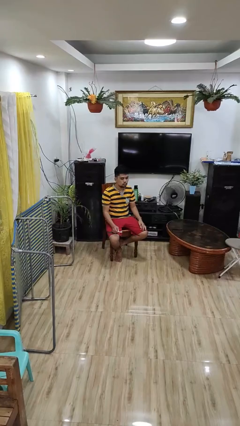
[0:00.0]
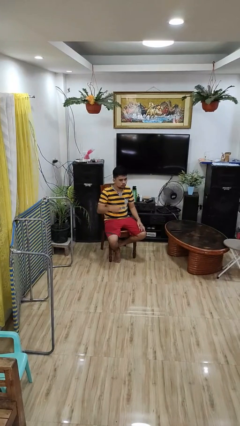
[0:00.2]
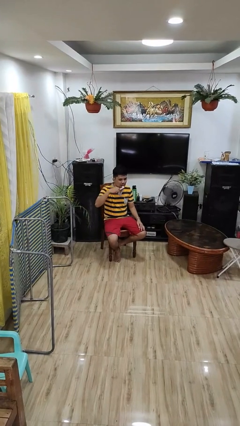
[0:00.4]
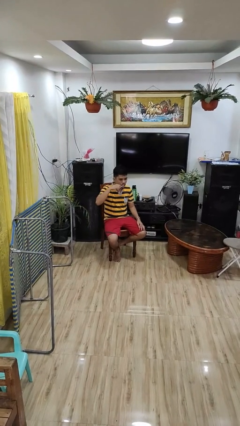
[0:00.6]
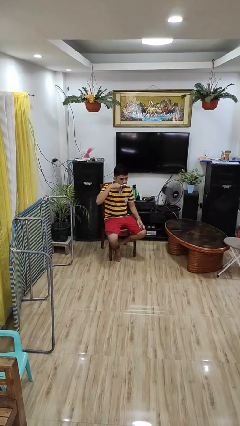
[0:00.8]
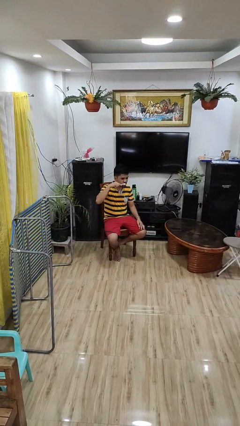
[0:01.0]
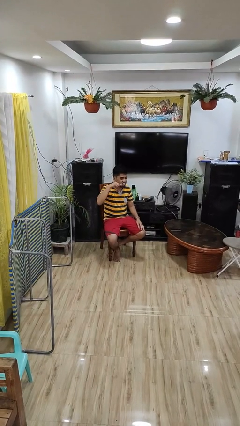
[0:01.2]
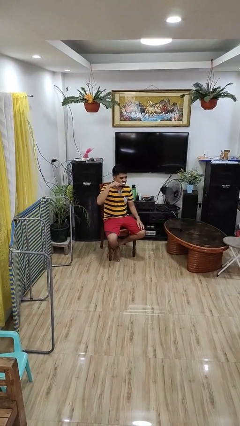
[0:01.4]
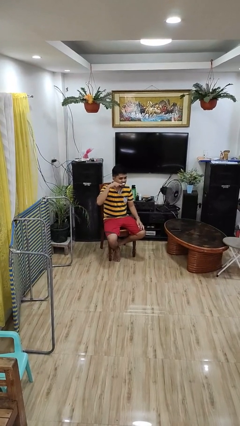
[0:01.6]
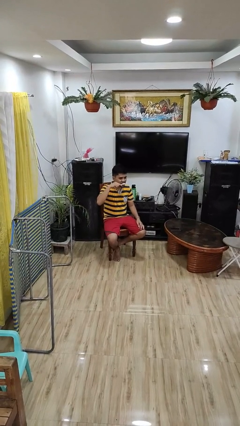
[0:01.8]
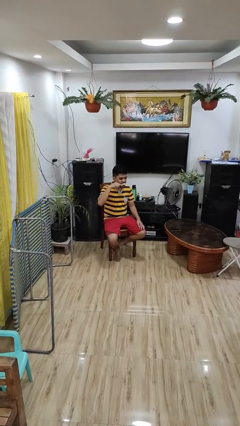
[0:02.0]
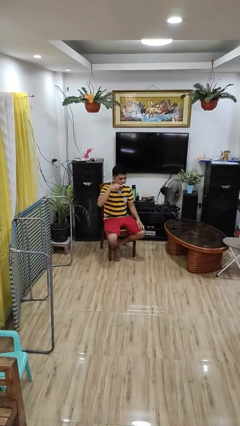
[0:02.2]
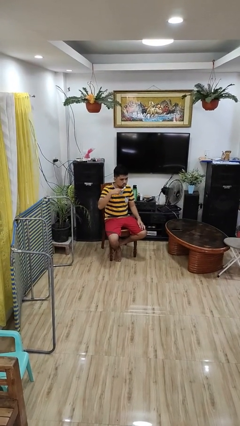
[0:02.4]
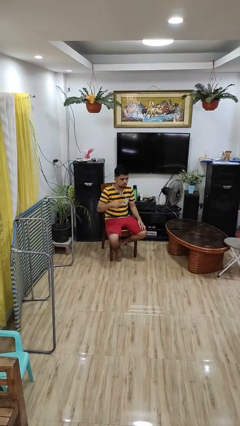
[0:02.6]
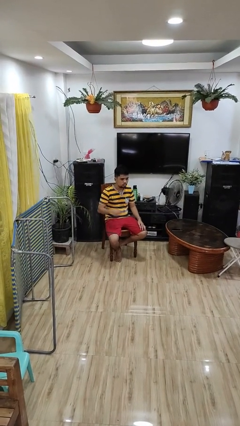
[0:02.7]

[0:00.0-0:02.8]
person brushes teeth

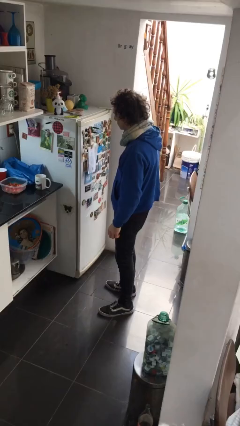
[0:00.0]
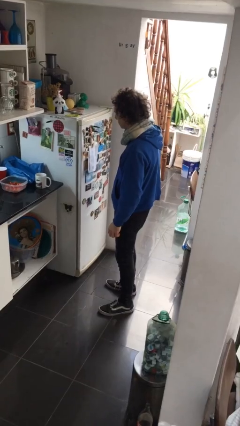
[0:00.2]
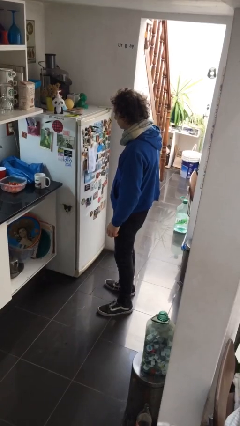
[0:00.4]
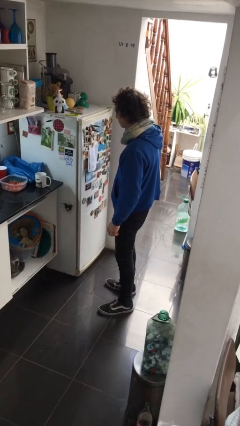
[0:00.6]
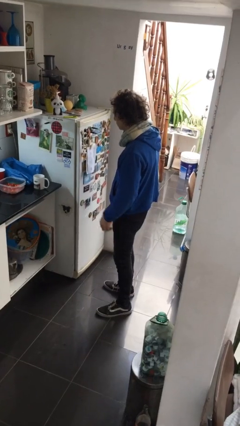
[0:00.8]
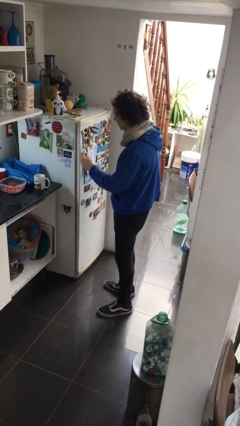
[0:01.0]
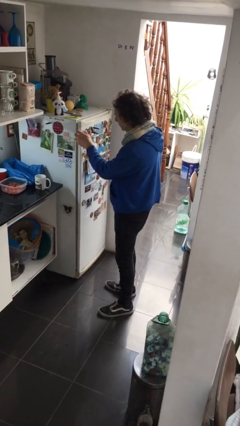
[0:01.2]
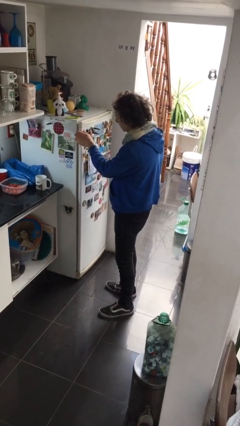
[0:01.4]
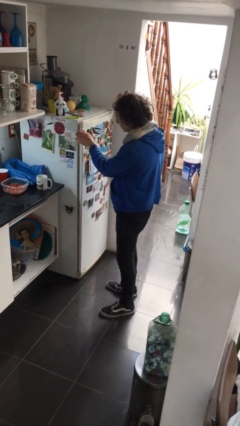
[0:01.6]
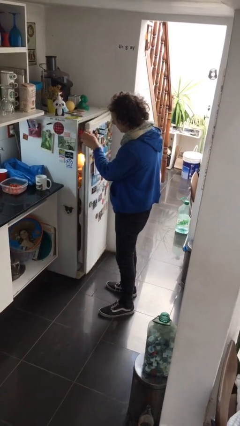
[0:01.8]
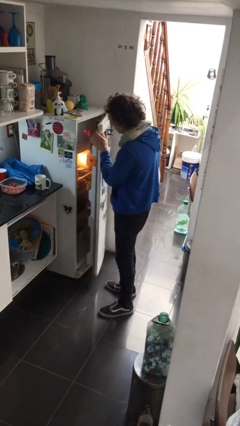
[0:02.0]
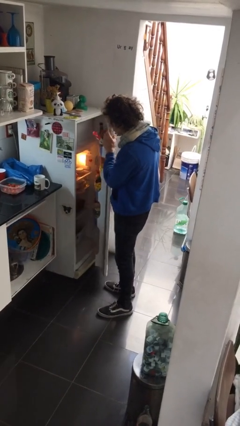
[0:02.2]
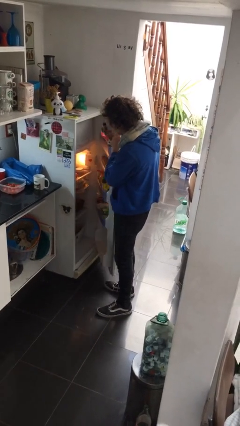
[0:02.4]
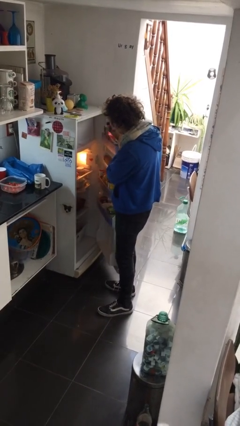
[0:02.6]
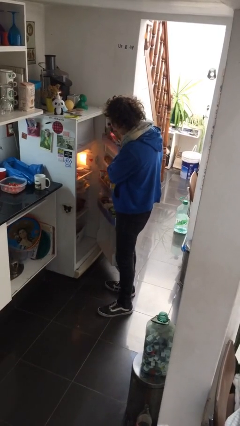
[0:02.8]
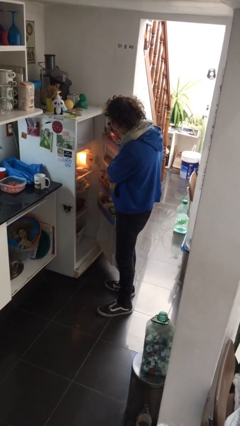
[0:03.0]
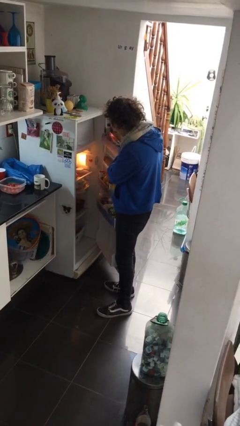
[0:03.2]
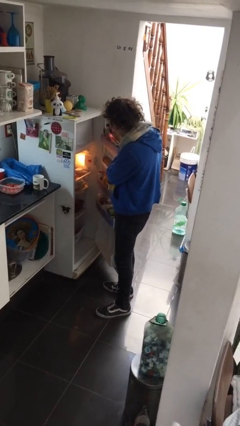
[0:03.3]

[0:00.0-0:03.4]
person opens refrigerator

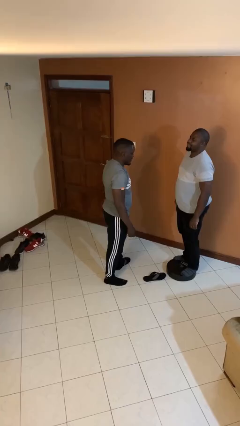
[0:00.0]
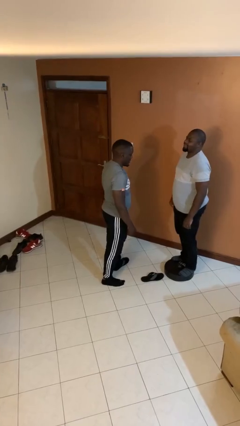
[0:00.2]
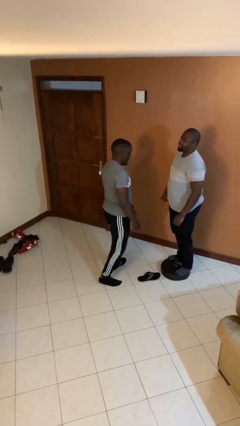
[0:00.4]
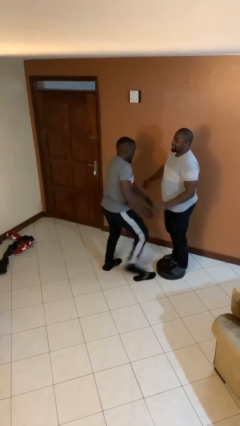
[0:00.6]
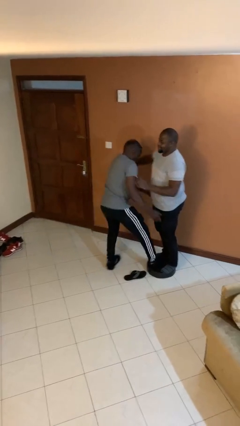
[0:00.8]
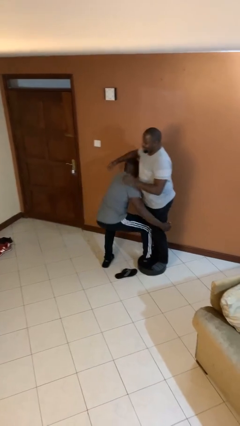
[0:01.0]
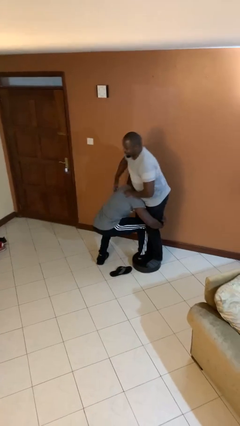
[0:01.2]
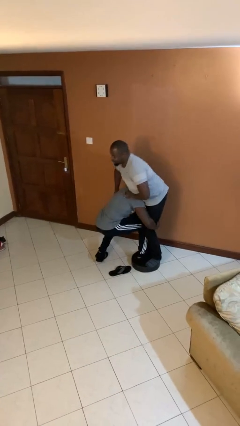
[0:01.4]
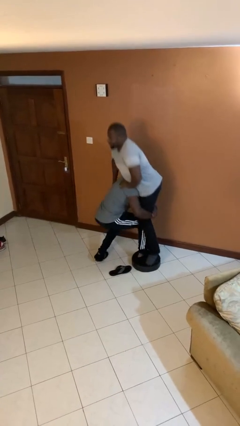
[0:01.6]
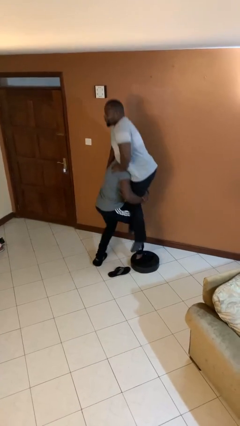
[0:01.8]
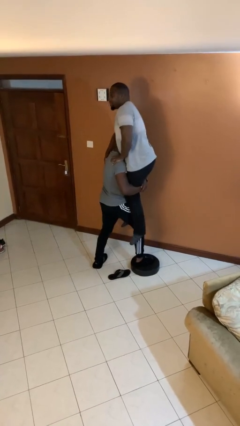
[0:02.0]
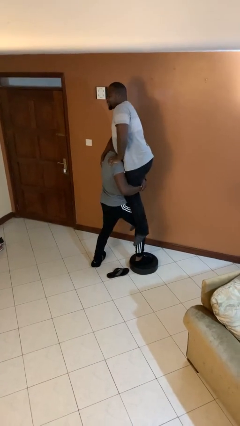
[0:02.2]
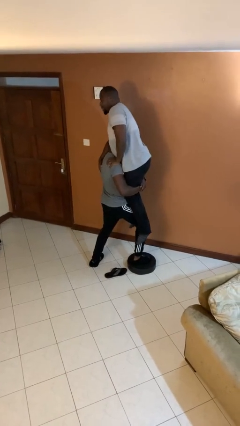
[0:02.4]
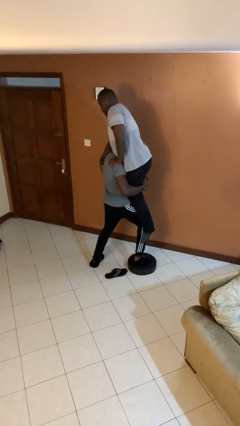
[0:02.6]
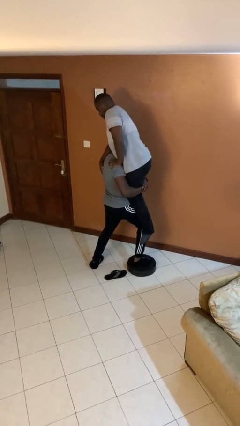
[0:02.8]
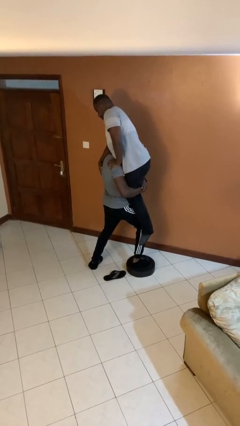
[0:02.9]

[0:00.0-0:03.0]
person picks up person

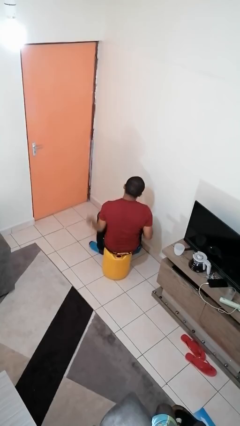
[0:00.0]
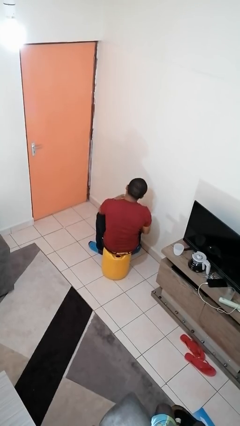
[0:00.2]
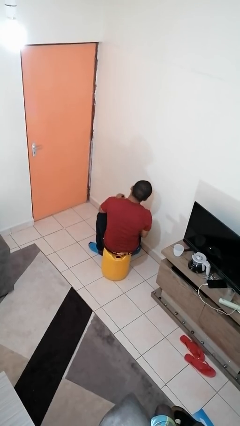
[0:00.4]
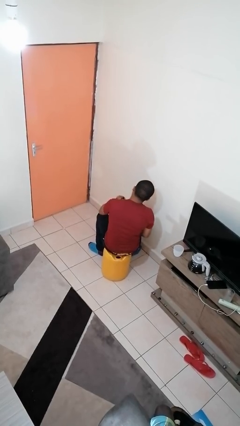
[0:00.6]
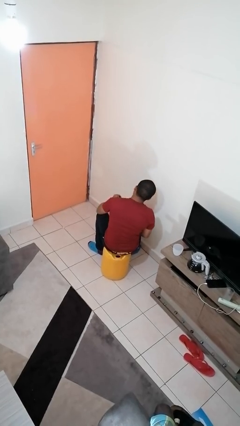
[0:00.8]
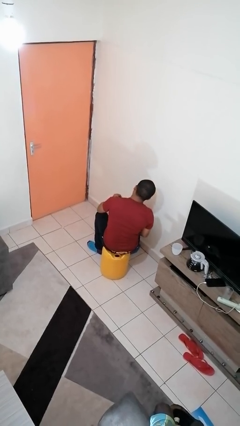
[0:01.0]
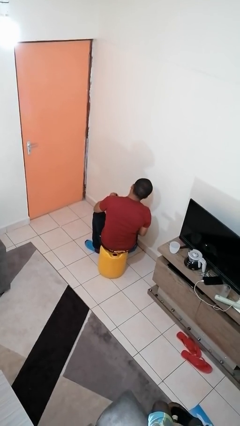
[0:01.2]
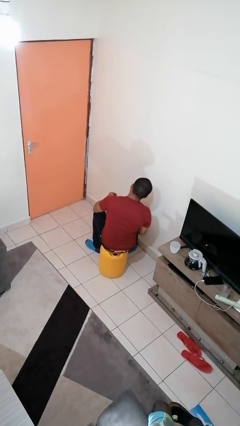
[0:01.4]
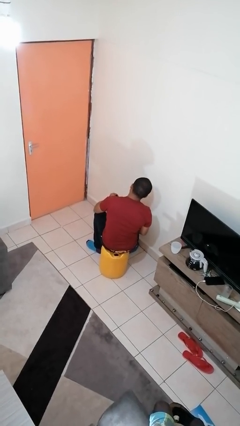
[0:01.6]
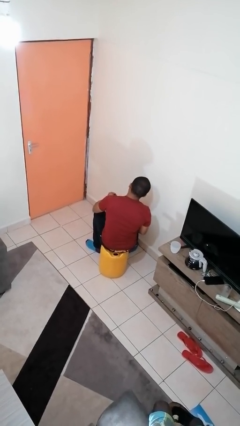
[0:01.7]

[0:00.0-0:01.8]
person stirs mug

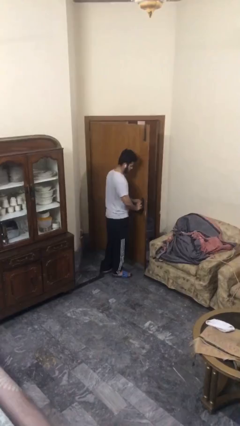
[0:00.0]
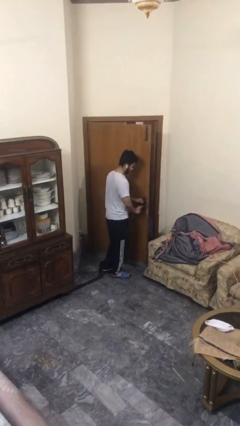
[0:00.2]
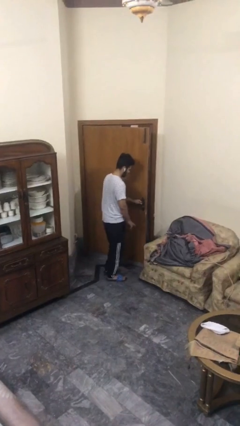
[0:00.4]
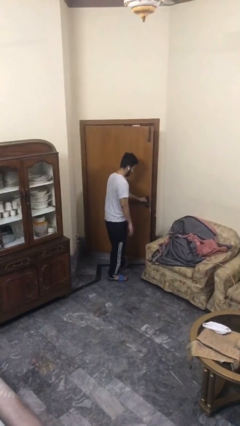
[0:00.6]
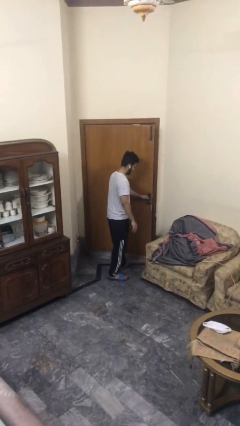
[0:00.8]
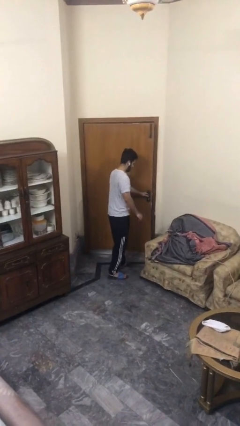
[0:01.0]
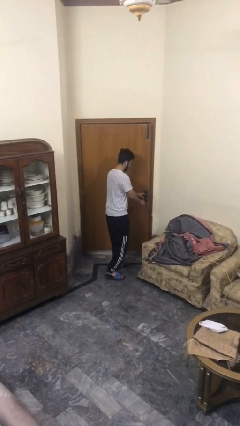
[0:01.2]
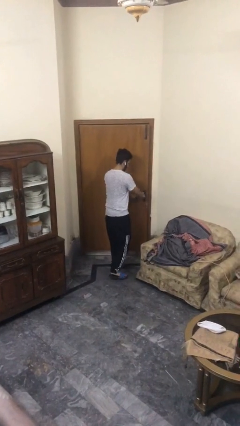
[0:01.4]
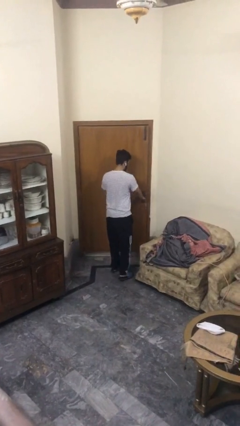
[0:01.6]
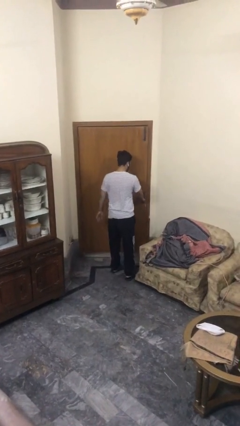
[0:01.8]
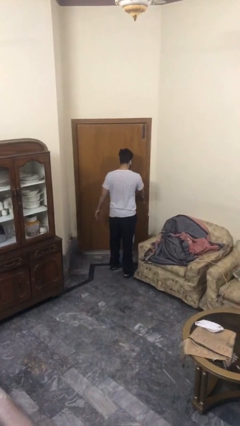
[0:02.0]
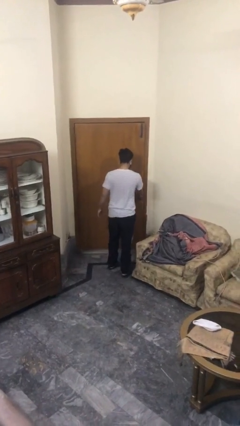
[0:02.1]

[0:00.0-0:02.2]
person closes facility door

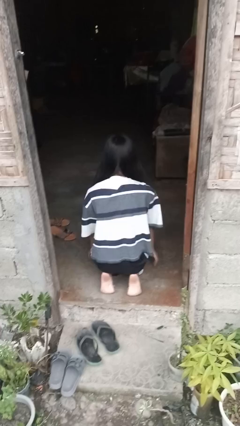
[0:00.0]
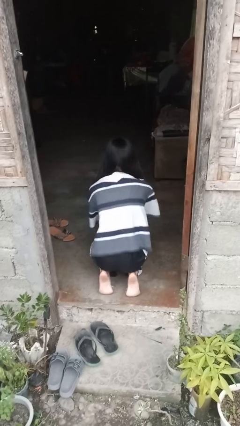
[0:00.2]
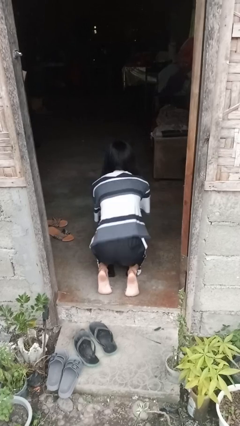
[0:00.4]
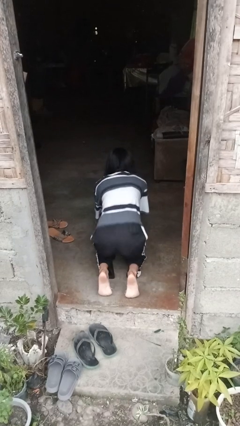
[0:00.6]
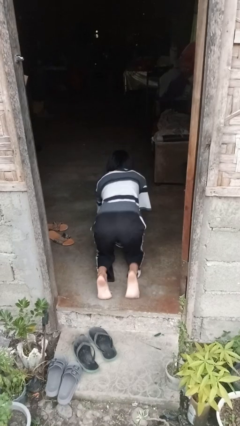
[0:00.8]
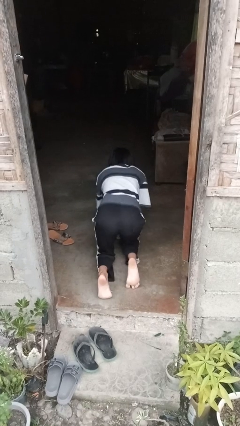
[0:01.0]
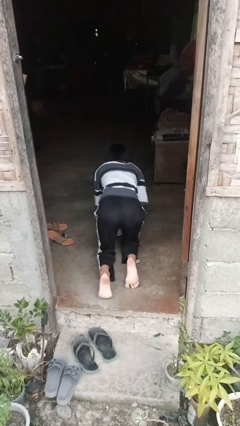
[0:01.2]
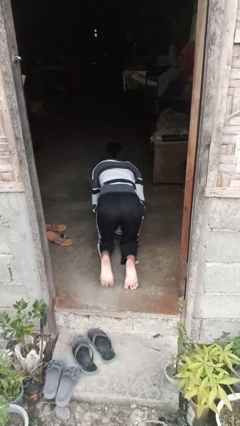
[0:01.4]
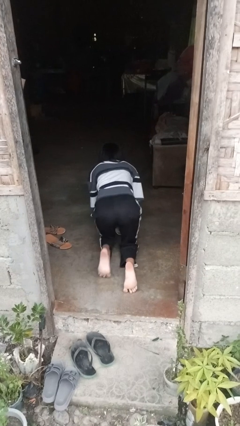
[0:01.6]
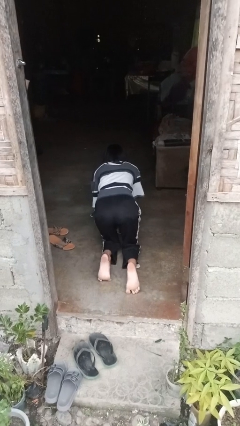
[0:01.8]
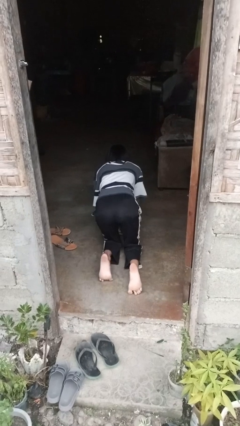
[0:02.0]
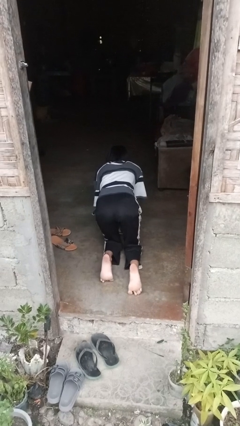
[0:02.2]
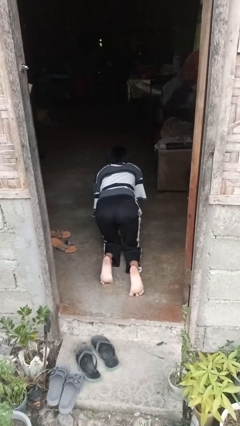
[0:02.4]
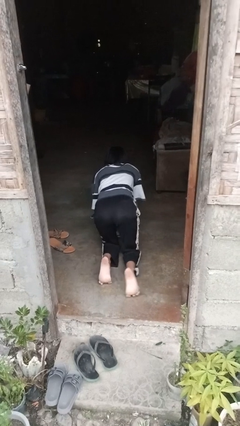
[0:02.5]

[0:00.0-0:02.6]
person crawls

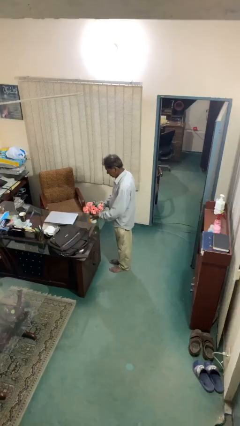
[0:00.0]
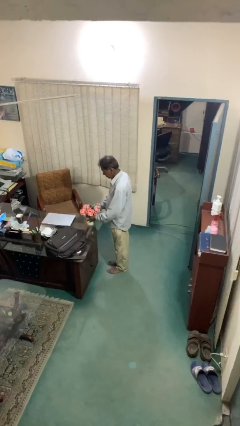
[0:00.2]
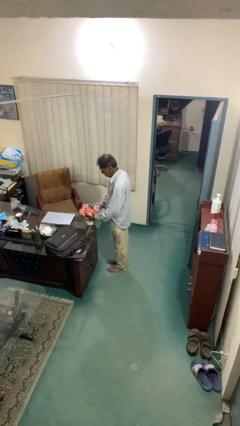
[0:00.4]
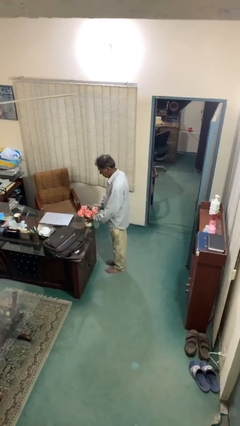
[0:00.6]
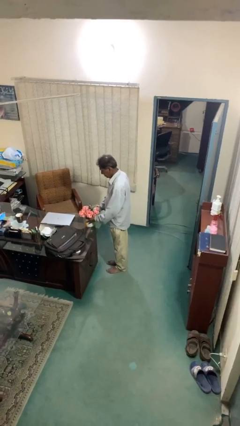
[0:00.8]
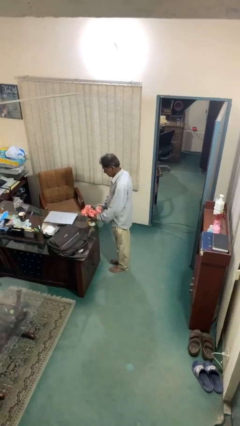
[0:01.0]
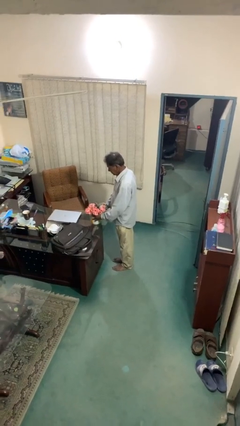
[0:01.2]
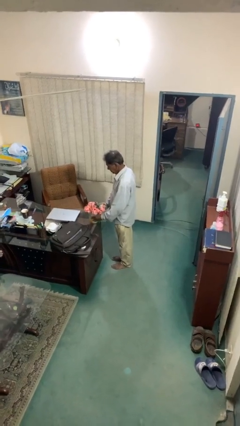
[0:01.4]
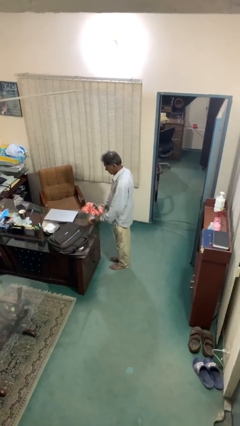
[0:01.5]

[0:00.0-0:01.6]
person puts down object on table
